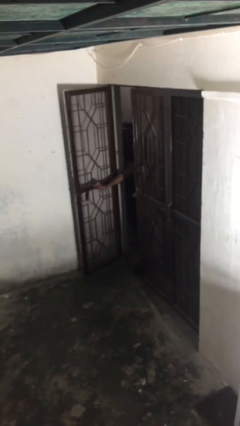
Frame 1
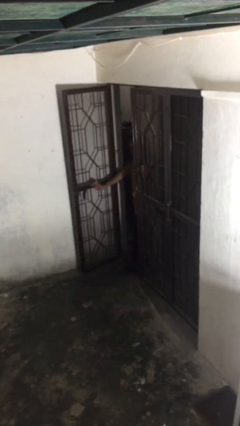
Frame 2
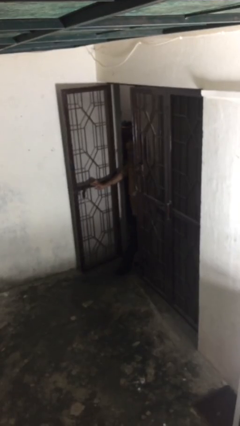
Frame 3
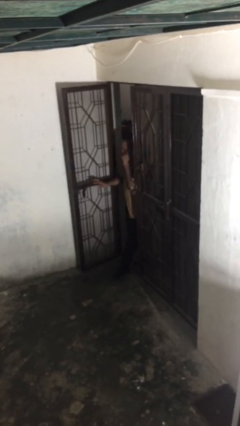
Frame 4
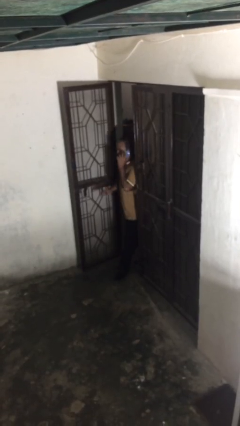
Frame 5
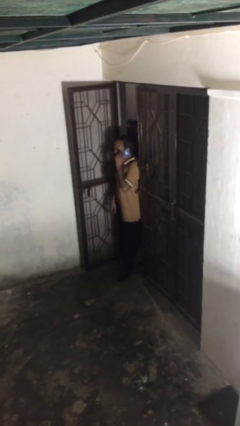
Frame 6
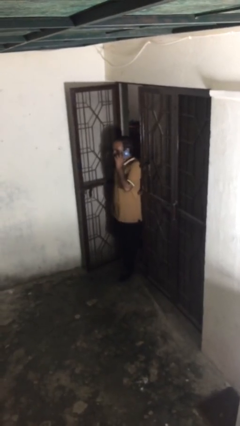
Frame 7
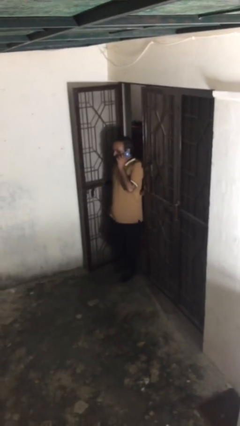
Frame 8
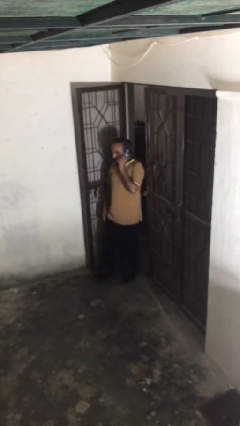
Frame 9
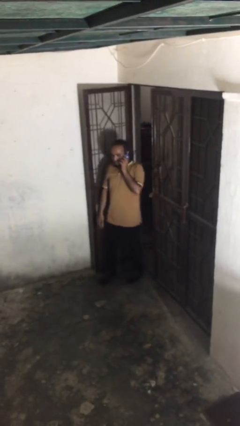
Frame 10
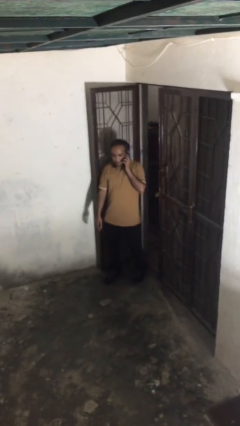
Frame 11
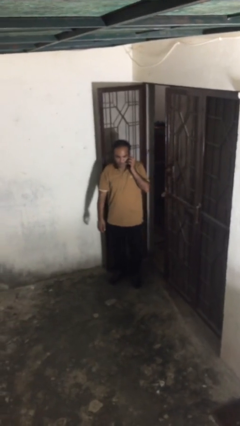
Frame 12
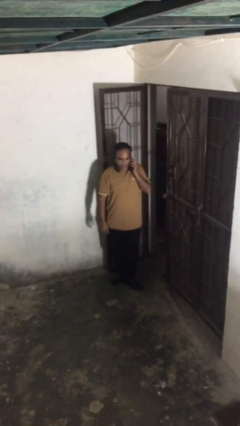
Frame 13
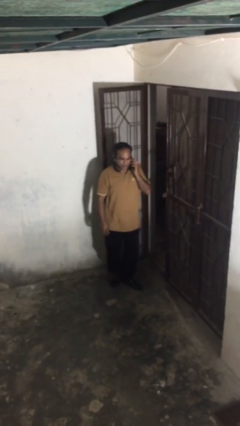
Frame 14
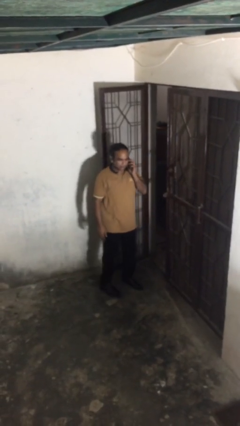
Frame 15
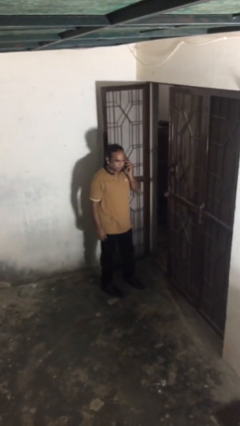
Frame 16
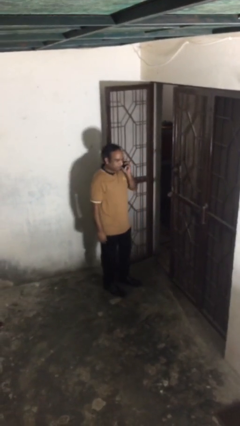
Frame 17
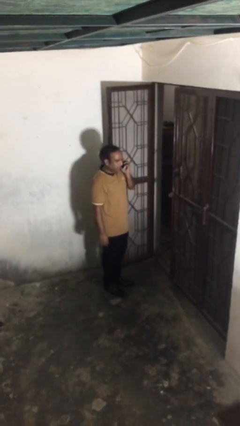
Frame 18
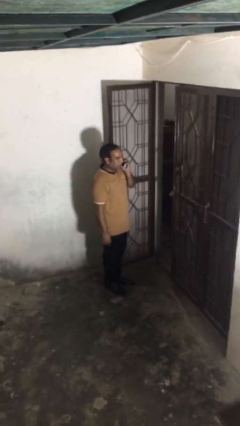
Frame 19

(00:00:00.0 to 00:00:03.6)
person enters scene through structure

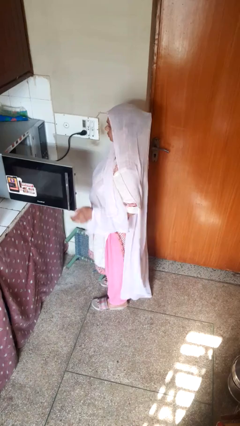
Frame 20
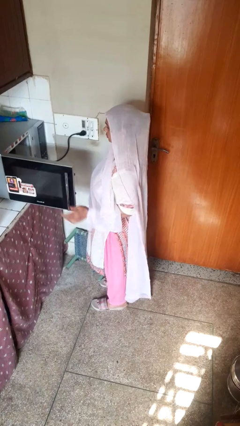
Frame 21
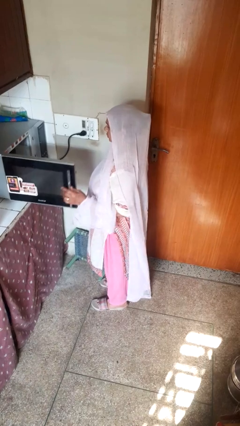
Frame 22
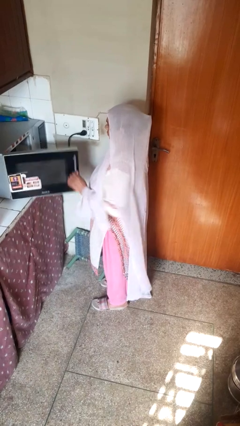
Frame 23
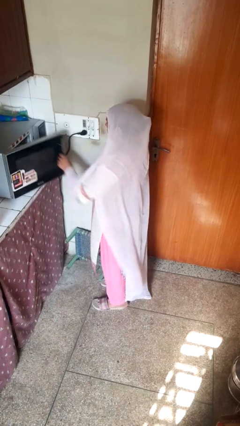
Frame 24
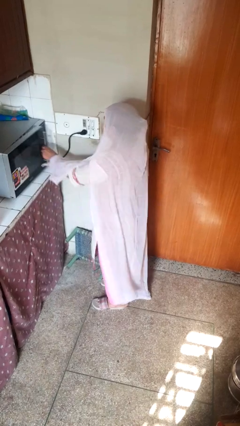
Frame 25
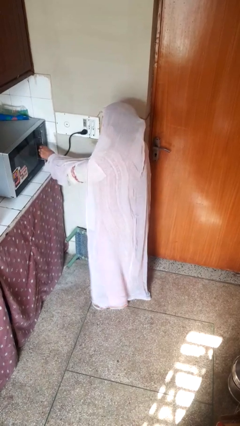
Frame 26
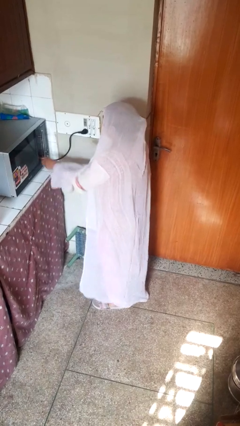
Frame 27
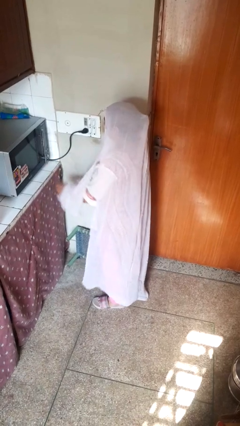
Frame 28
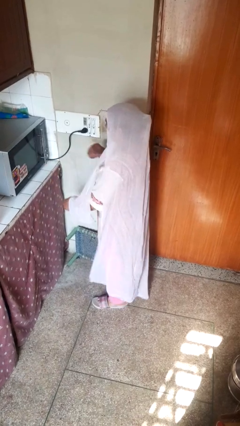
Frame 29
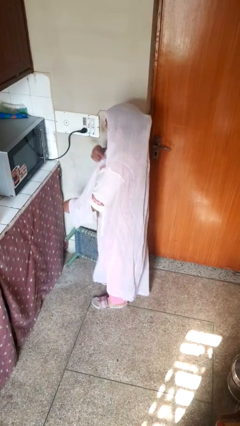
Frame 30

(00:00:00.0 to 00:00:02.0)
person closes oven door

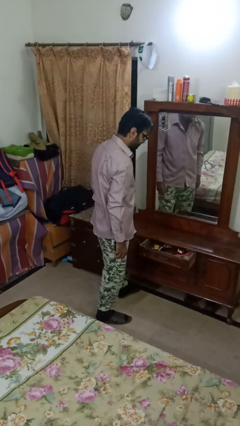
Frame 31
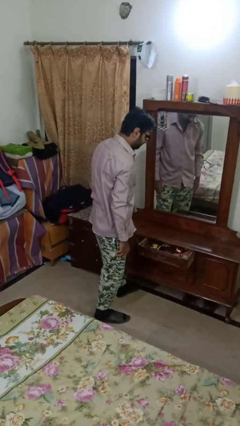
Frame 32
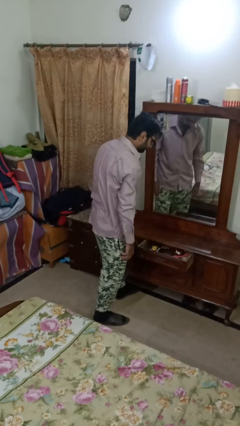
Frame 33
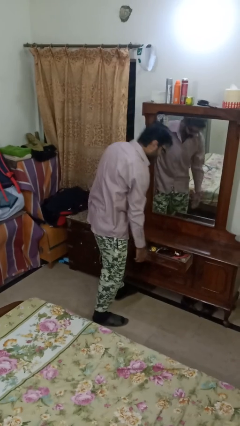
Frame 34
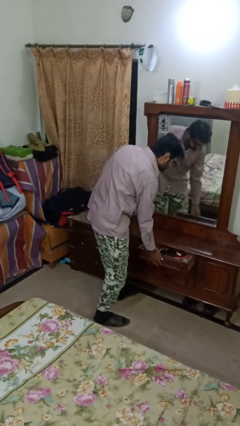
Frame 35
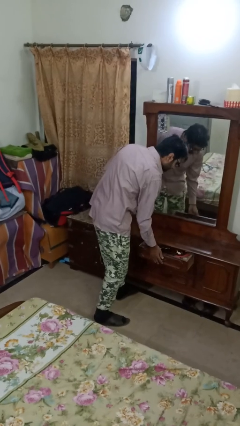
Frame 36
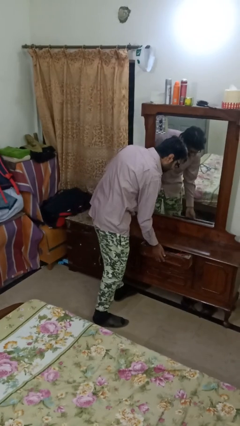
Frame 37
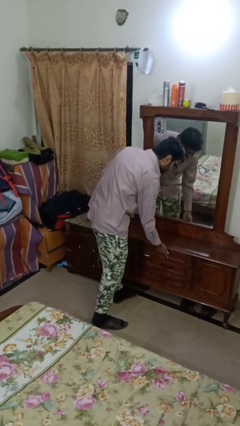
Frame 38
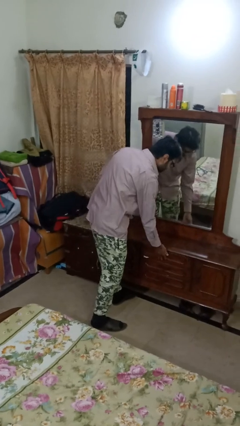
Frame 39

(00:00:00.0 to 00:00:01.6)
person closes dresser drawer

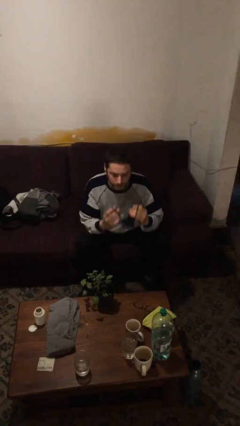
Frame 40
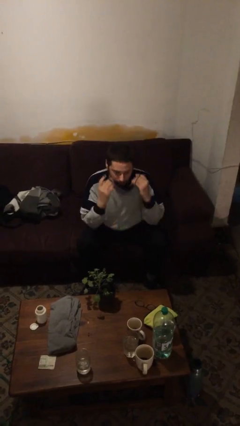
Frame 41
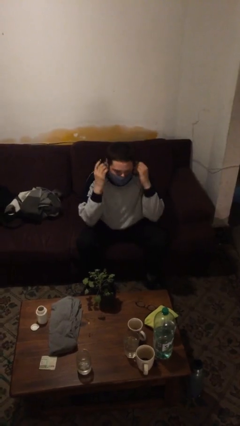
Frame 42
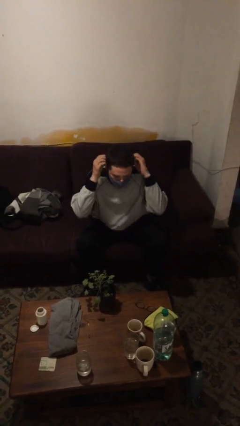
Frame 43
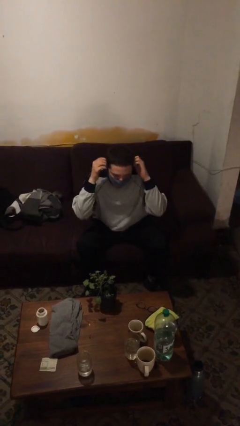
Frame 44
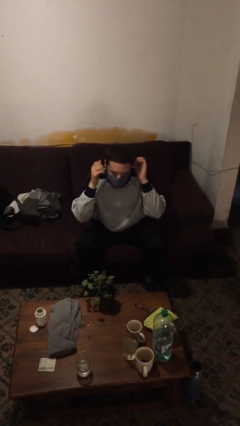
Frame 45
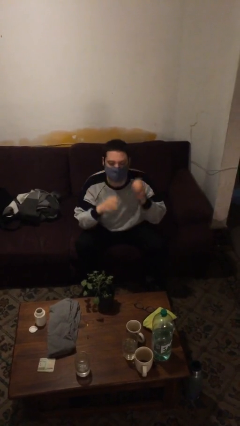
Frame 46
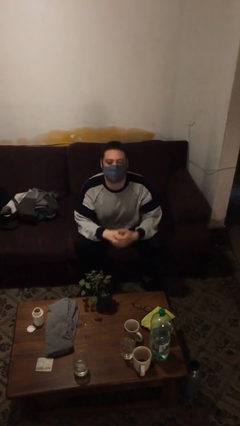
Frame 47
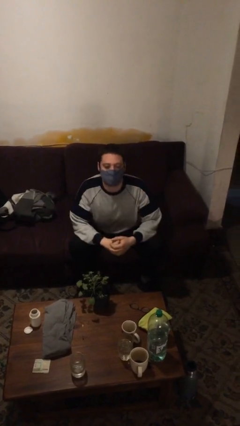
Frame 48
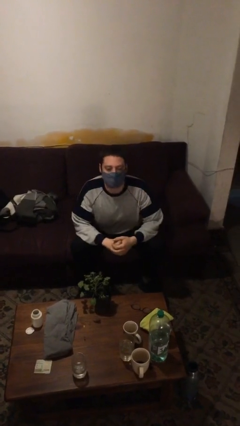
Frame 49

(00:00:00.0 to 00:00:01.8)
person puts on facemask

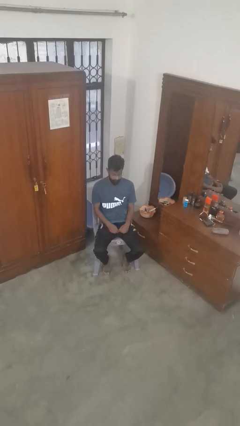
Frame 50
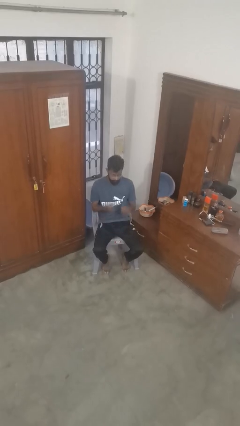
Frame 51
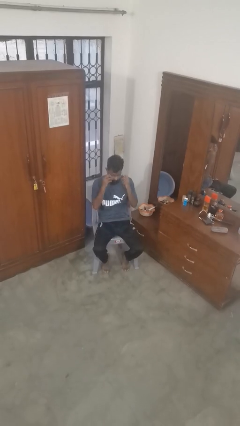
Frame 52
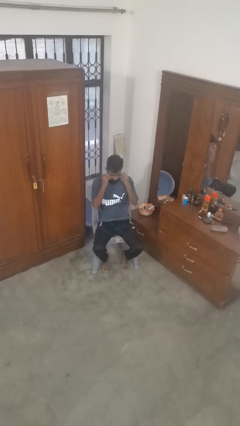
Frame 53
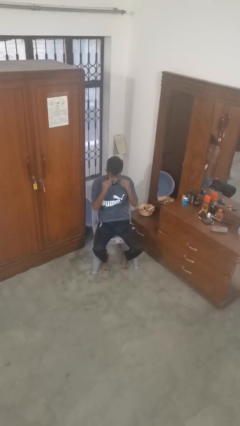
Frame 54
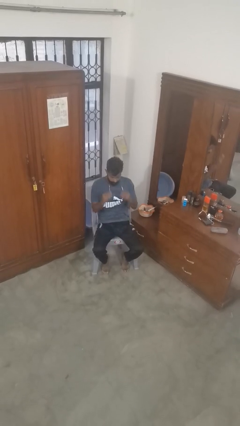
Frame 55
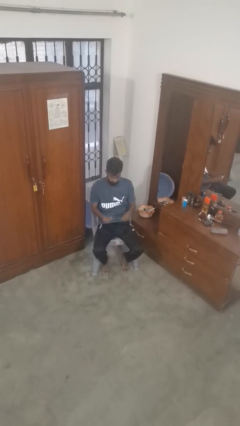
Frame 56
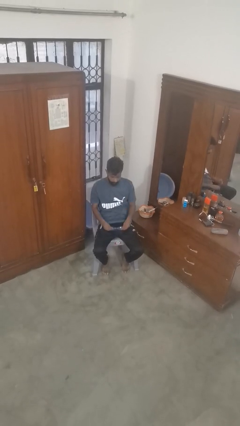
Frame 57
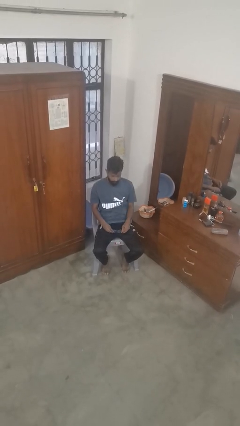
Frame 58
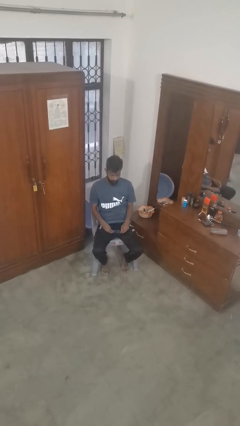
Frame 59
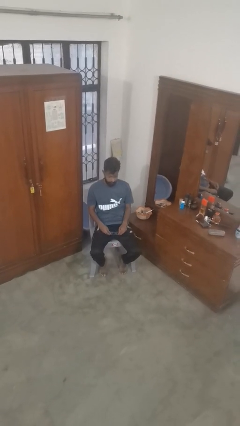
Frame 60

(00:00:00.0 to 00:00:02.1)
person takes off glasses

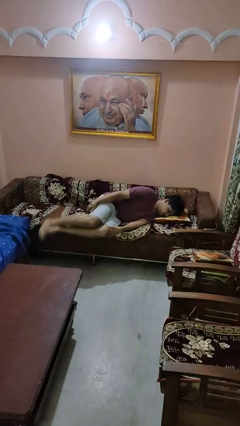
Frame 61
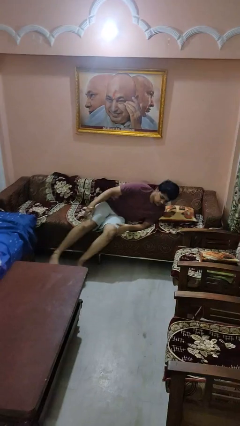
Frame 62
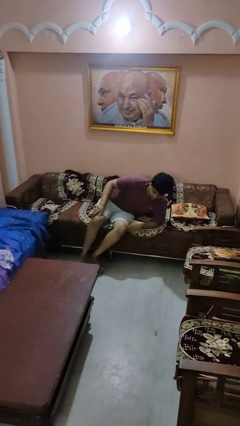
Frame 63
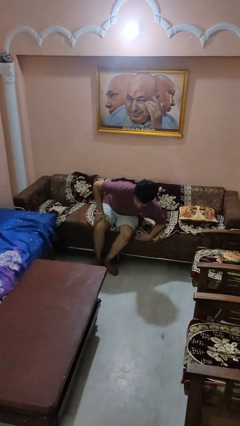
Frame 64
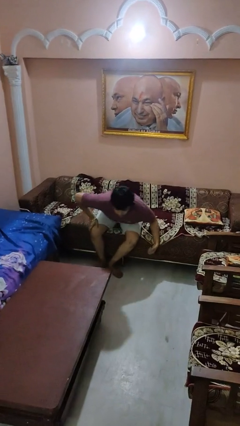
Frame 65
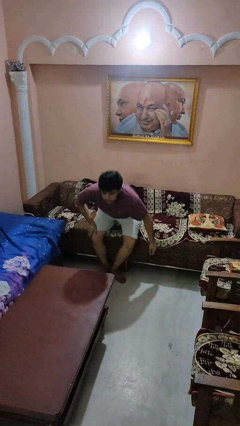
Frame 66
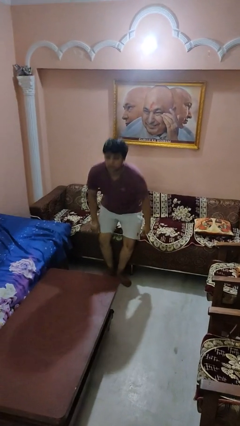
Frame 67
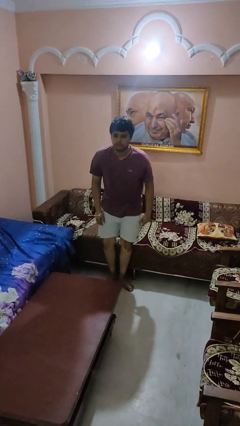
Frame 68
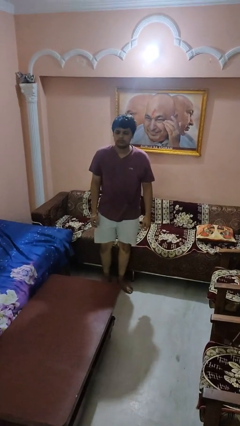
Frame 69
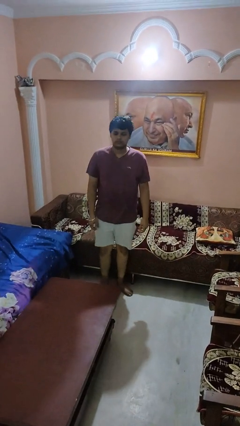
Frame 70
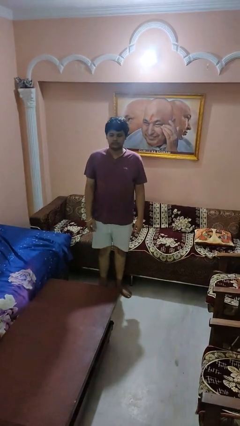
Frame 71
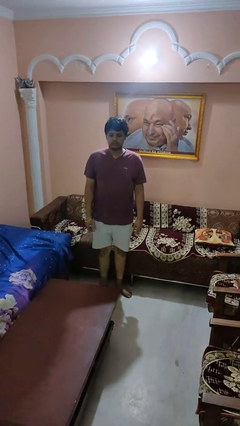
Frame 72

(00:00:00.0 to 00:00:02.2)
person stands up

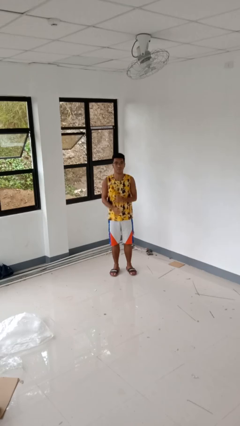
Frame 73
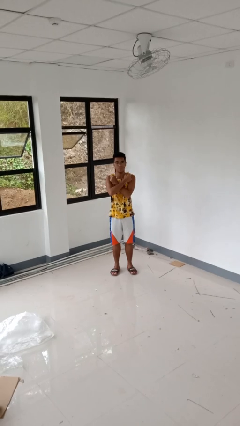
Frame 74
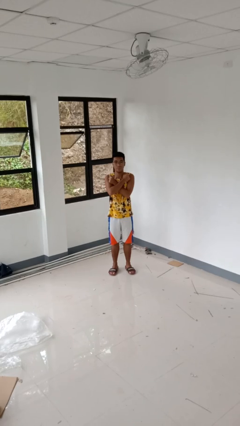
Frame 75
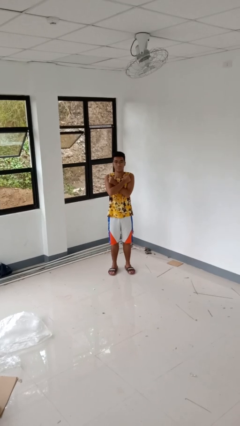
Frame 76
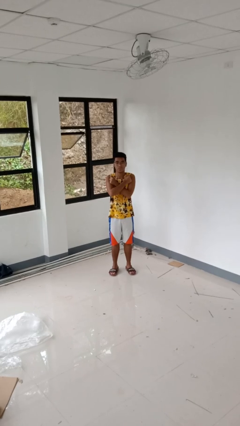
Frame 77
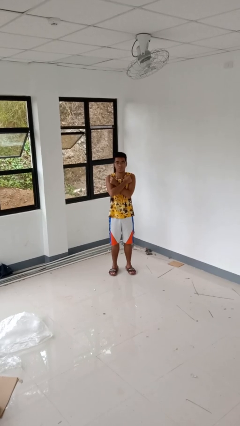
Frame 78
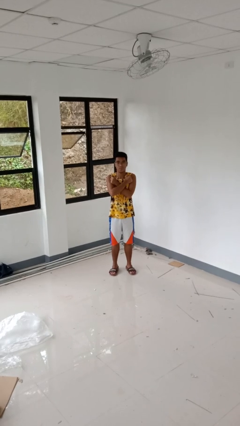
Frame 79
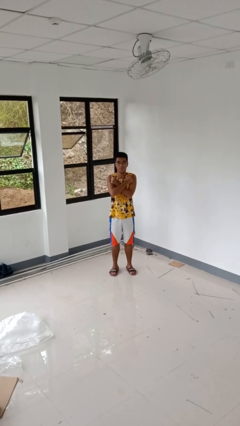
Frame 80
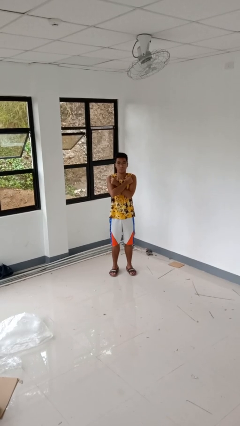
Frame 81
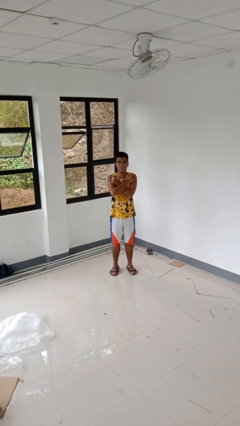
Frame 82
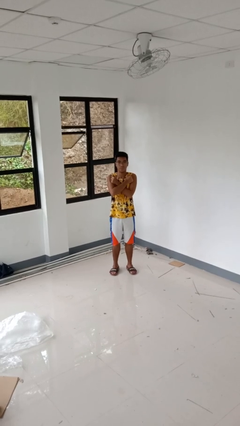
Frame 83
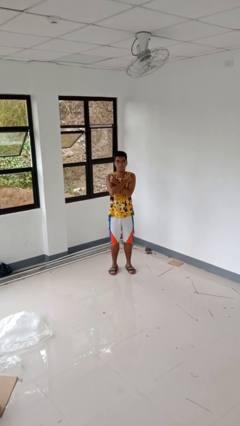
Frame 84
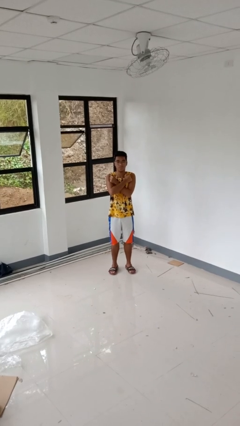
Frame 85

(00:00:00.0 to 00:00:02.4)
person gestures arms x

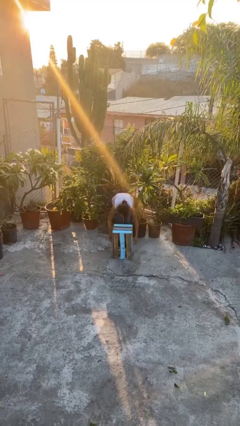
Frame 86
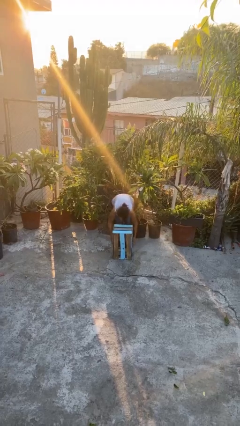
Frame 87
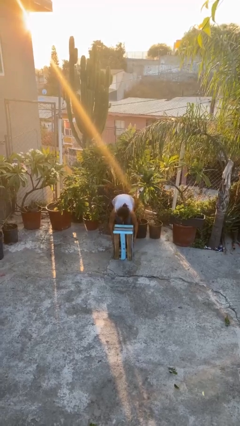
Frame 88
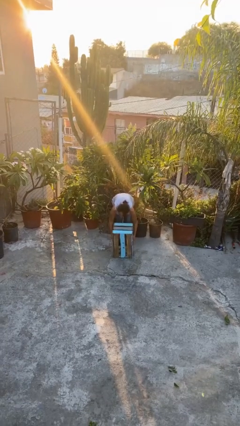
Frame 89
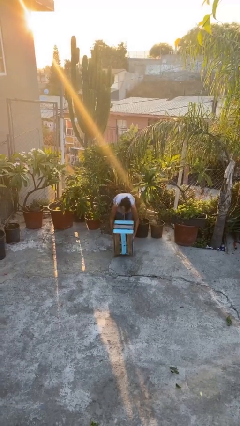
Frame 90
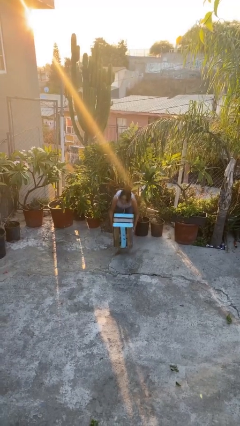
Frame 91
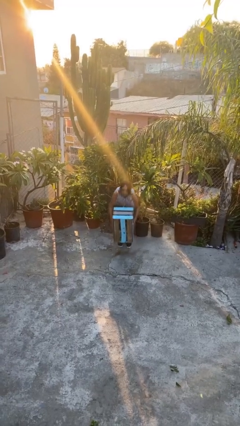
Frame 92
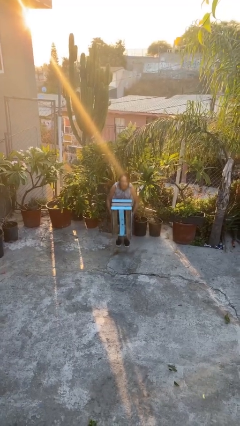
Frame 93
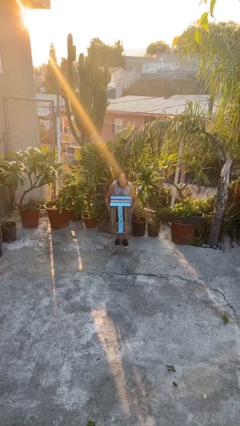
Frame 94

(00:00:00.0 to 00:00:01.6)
person picks up object from floor
